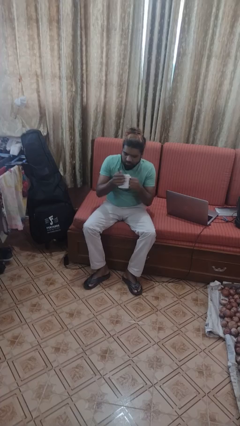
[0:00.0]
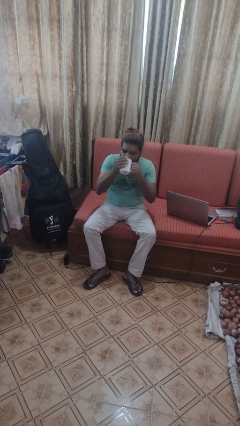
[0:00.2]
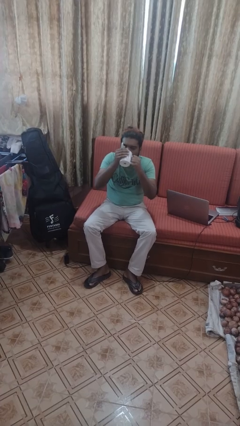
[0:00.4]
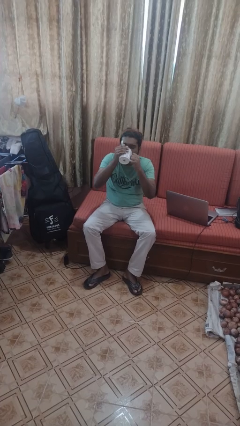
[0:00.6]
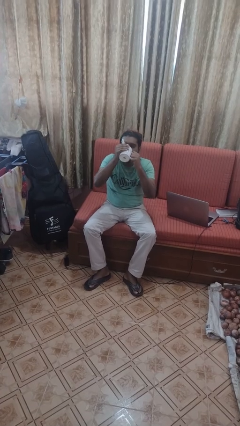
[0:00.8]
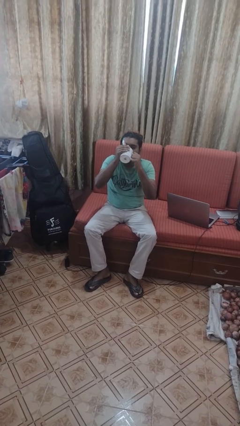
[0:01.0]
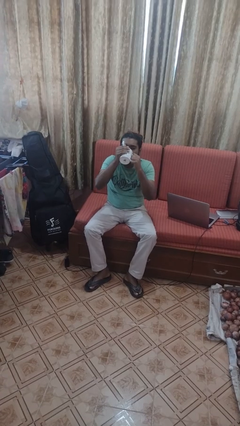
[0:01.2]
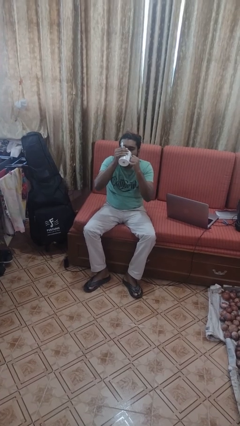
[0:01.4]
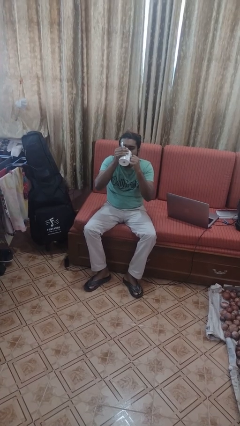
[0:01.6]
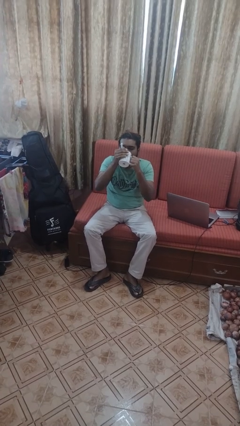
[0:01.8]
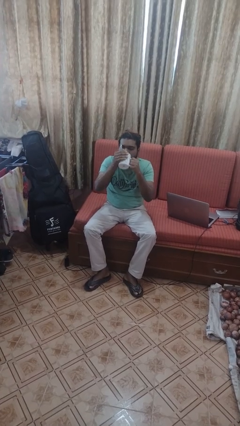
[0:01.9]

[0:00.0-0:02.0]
person drinks from mug

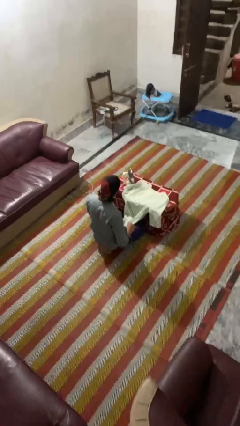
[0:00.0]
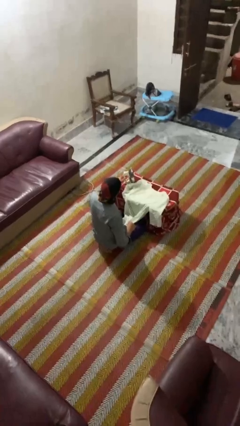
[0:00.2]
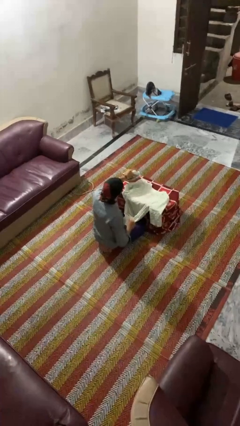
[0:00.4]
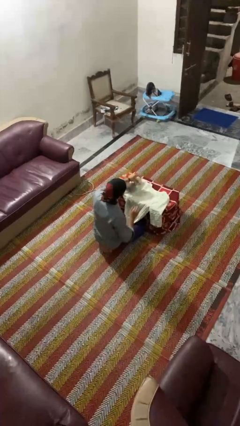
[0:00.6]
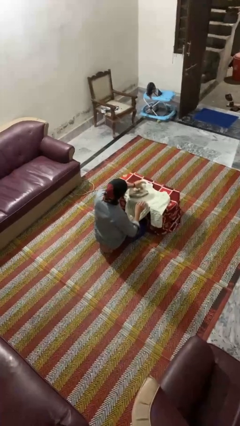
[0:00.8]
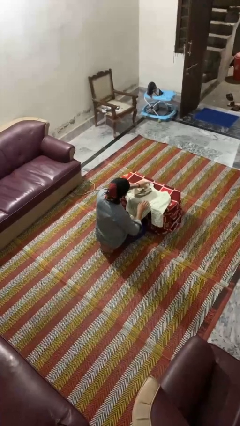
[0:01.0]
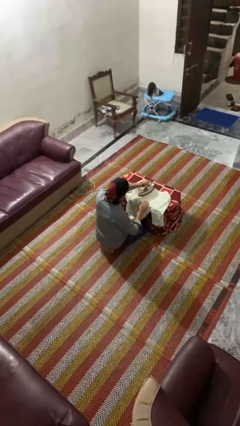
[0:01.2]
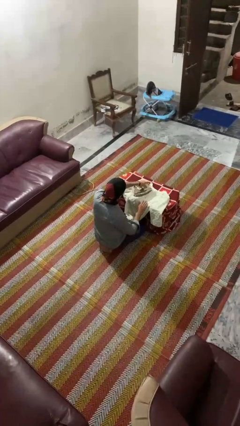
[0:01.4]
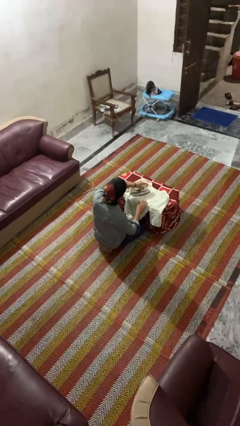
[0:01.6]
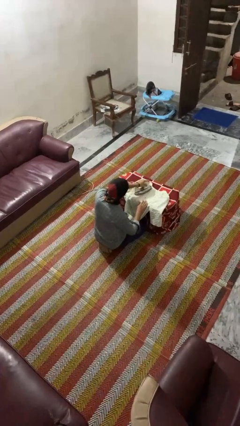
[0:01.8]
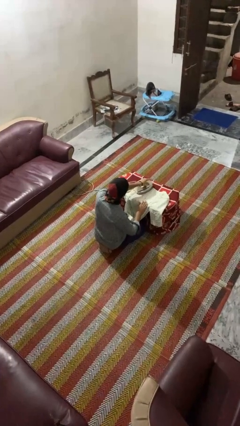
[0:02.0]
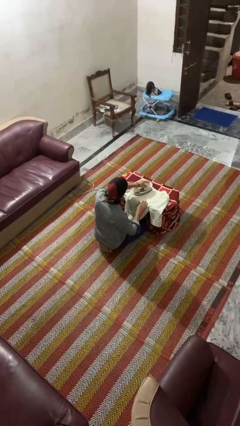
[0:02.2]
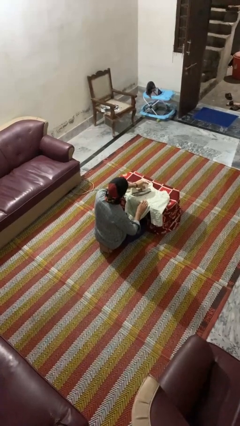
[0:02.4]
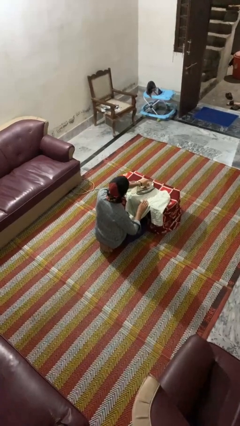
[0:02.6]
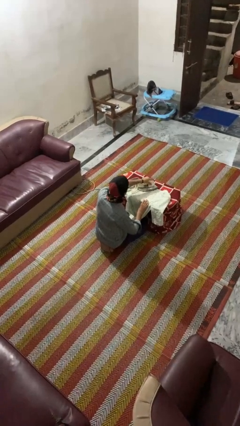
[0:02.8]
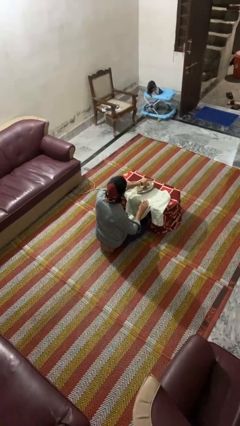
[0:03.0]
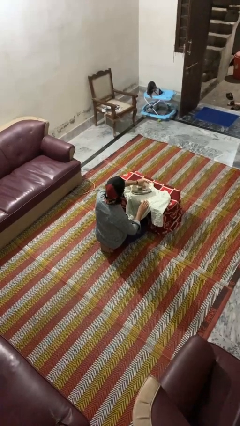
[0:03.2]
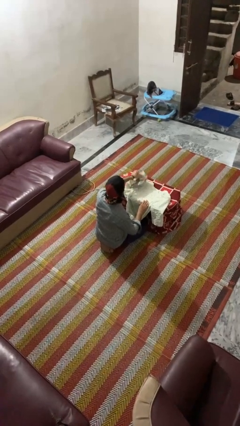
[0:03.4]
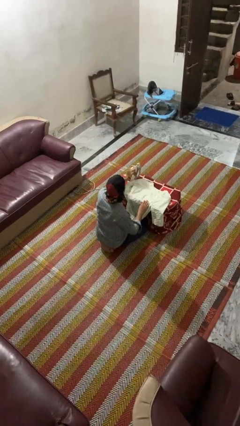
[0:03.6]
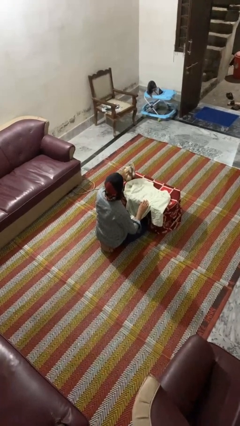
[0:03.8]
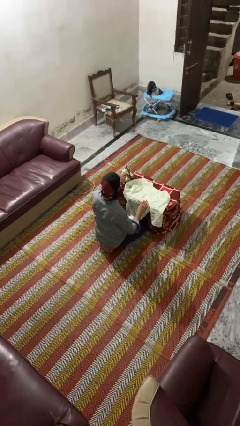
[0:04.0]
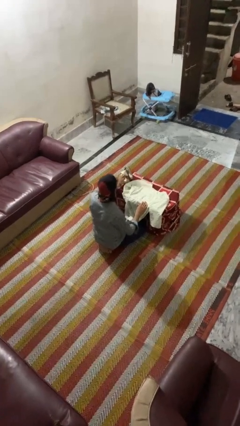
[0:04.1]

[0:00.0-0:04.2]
person irons clothes

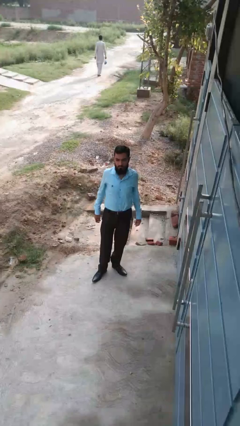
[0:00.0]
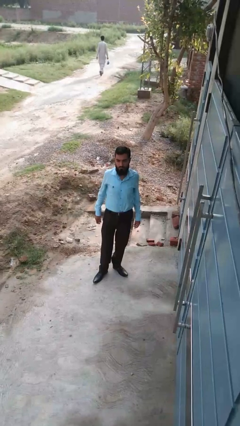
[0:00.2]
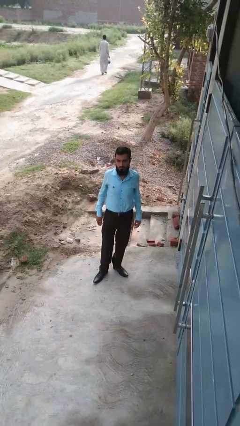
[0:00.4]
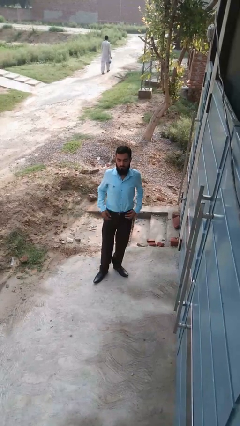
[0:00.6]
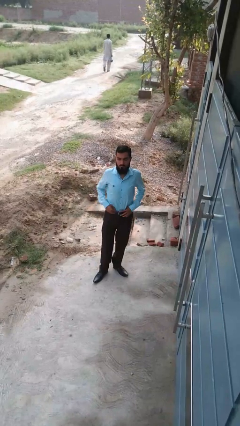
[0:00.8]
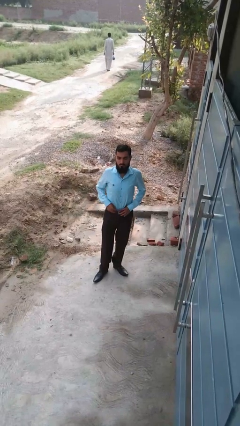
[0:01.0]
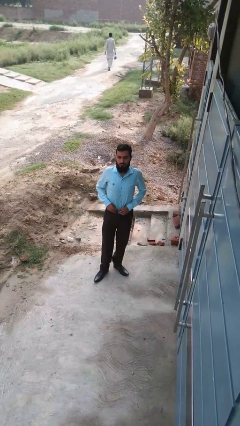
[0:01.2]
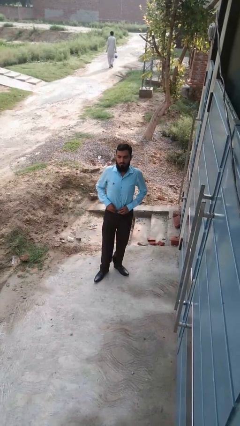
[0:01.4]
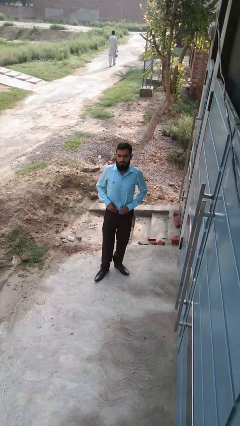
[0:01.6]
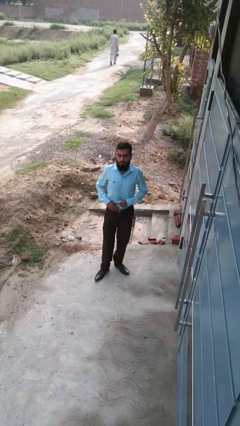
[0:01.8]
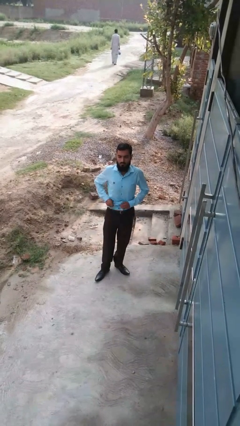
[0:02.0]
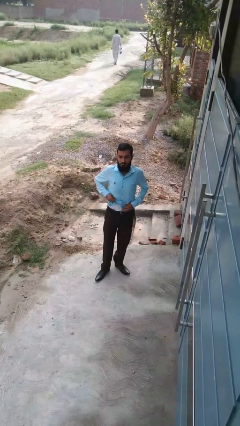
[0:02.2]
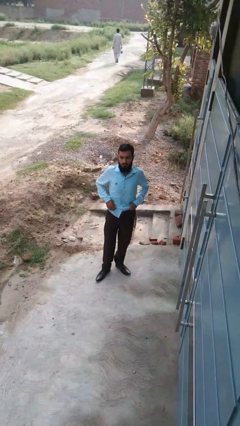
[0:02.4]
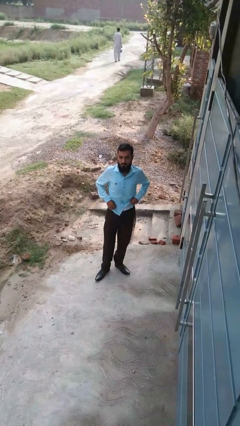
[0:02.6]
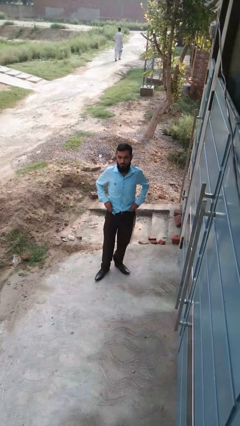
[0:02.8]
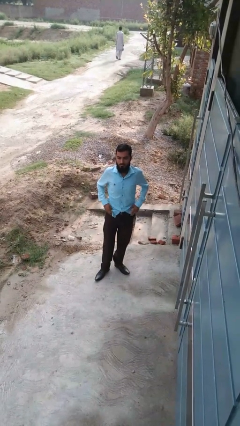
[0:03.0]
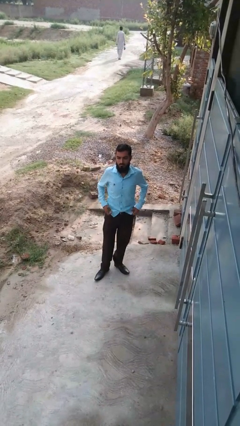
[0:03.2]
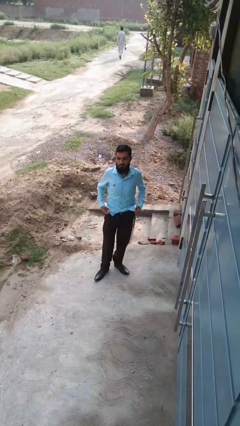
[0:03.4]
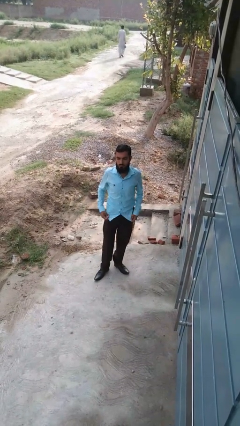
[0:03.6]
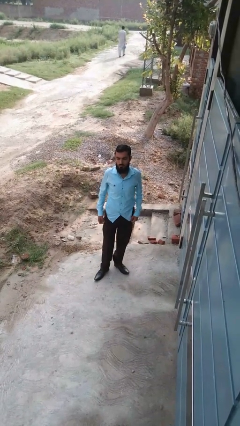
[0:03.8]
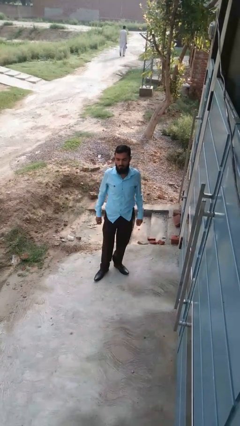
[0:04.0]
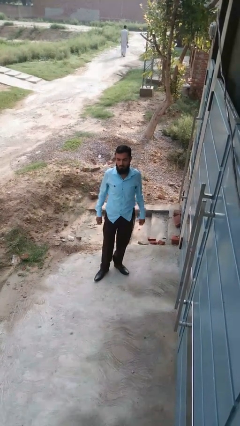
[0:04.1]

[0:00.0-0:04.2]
person untucks shirt

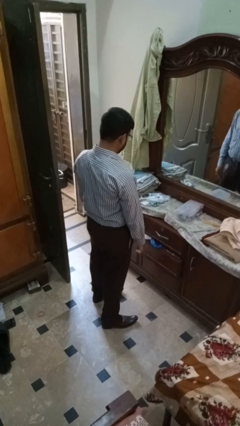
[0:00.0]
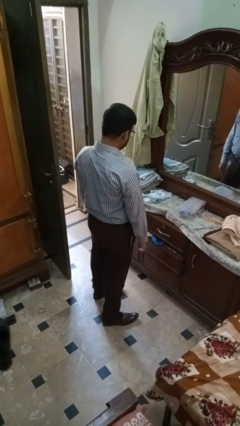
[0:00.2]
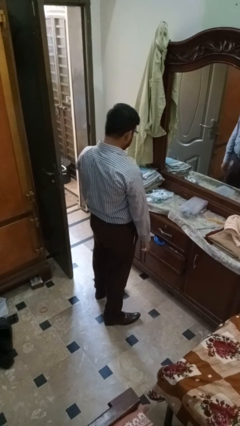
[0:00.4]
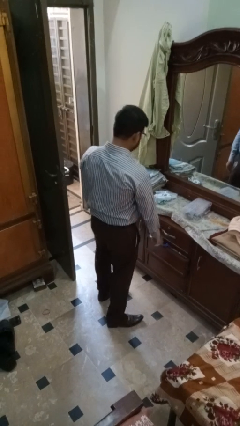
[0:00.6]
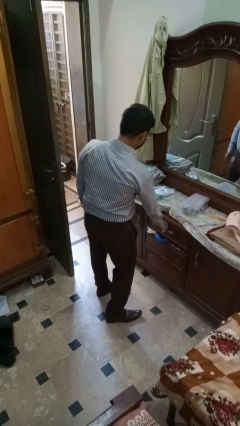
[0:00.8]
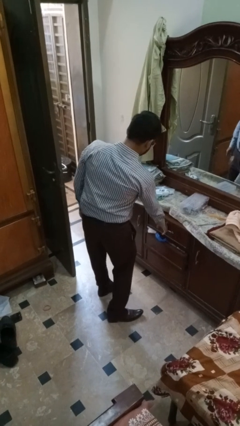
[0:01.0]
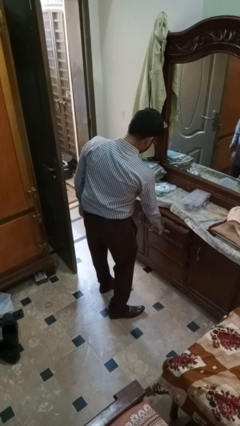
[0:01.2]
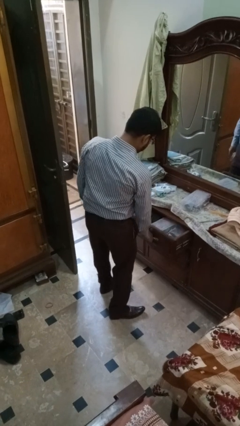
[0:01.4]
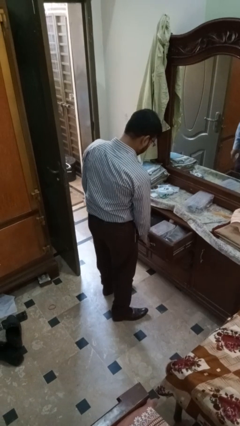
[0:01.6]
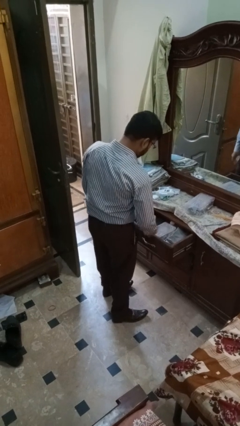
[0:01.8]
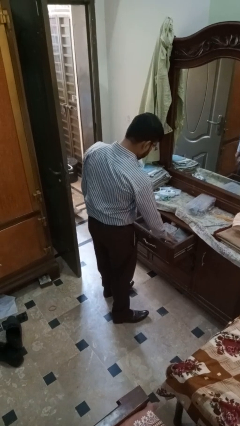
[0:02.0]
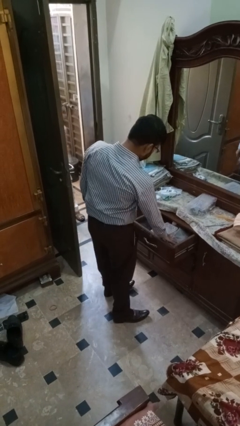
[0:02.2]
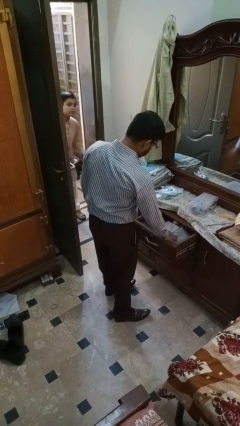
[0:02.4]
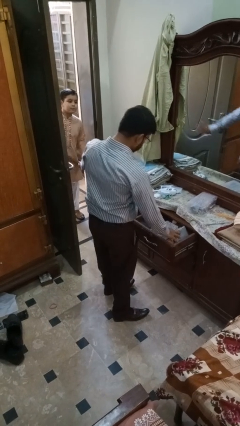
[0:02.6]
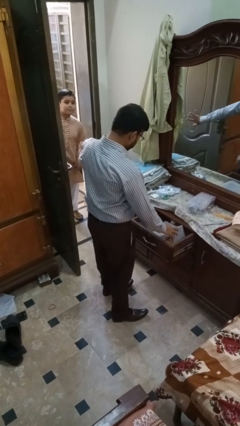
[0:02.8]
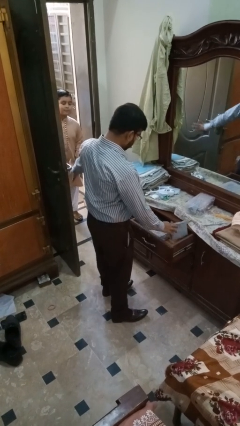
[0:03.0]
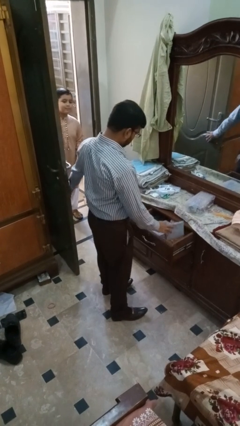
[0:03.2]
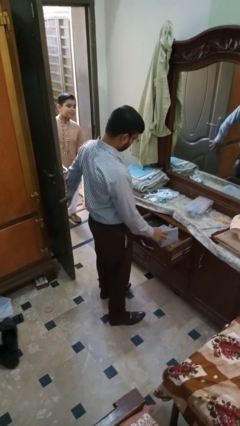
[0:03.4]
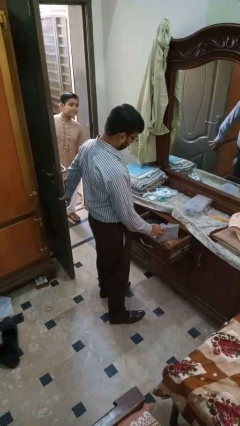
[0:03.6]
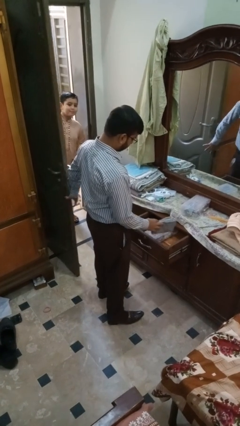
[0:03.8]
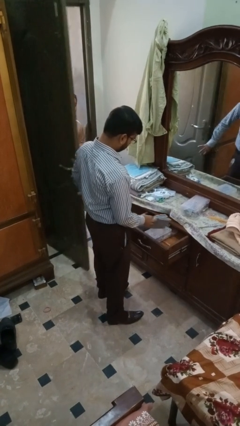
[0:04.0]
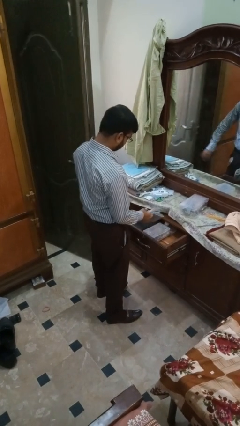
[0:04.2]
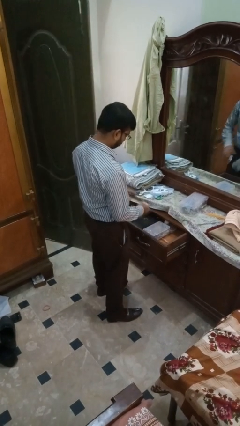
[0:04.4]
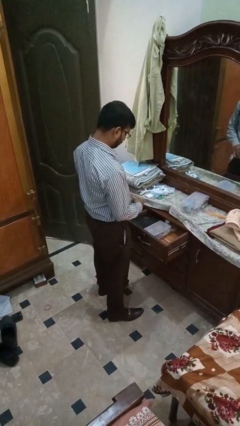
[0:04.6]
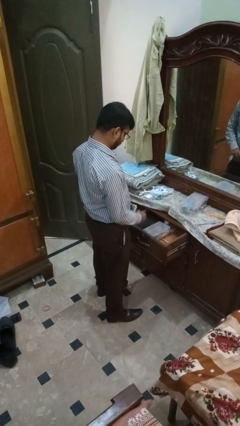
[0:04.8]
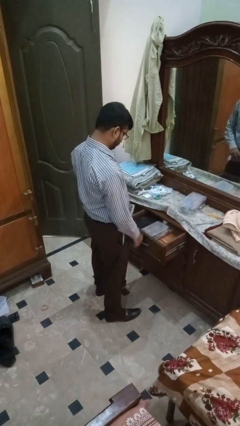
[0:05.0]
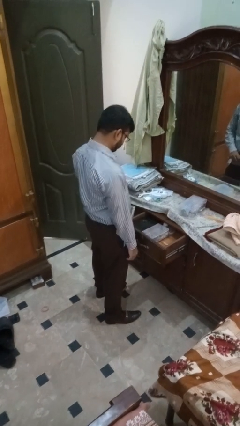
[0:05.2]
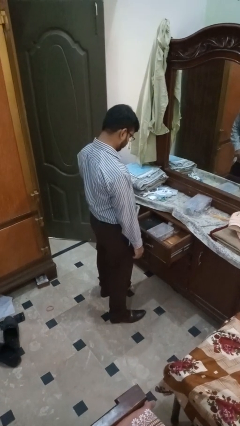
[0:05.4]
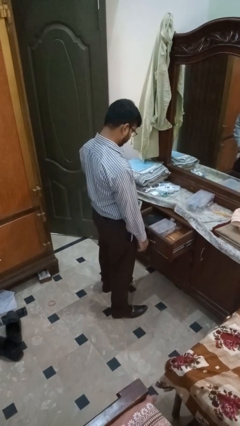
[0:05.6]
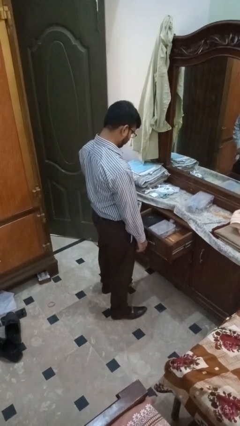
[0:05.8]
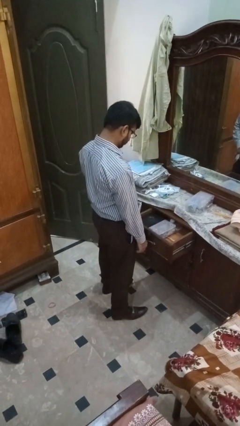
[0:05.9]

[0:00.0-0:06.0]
person takes clothes from dresser

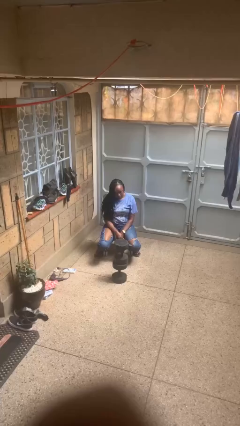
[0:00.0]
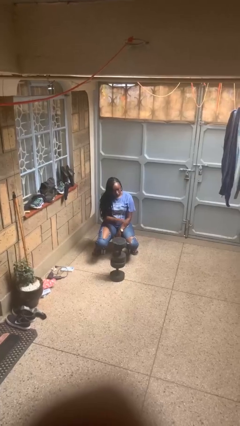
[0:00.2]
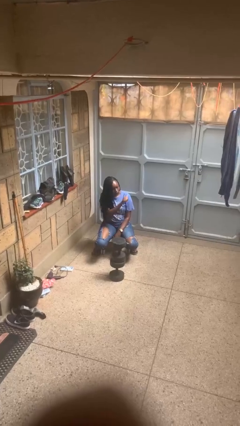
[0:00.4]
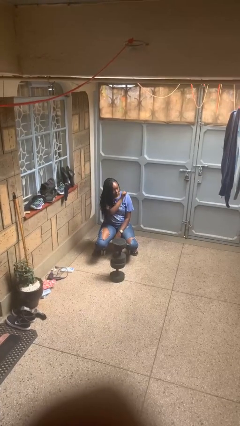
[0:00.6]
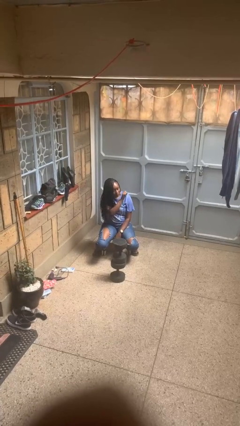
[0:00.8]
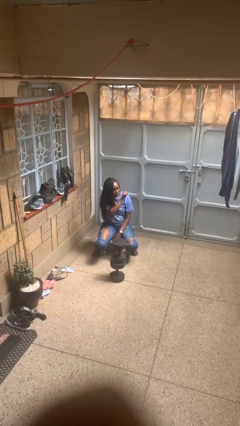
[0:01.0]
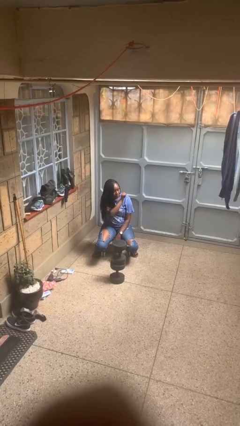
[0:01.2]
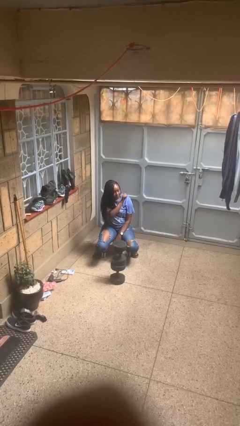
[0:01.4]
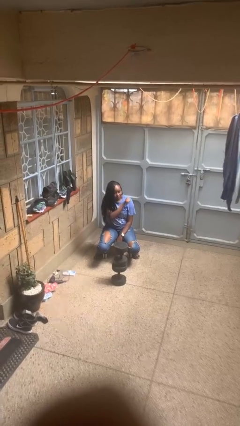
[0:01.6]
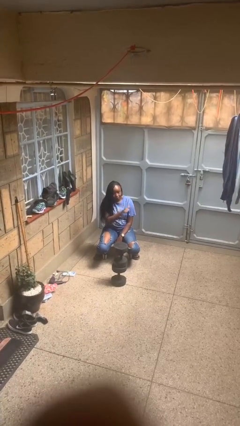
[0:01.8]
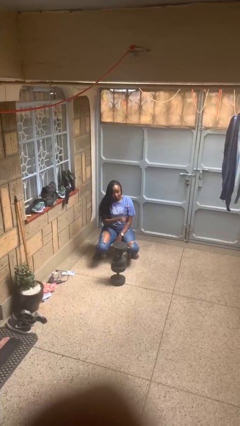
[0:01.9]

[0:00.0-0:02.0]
person gestures behind me
